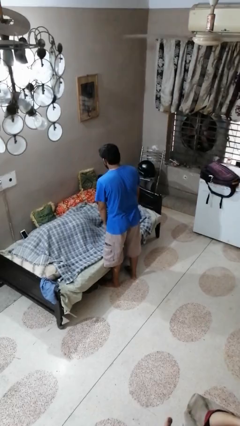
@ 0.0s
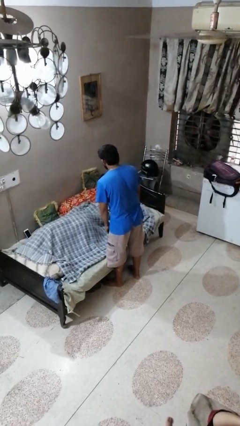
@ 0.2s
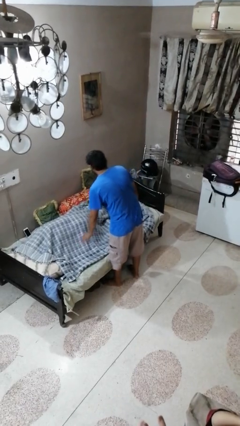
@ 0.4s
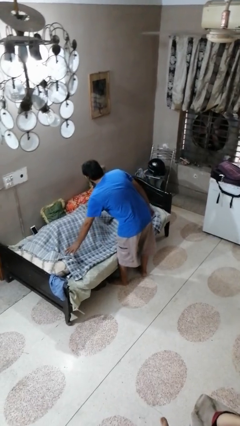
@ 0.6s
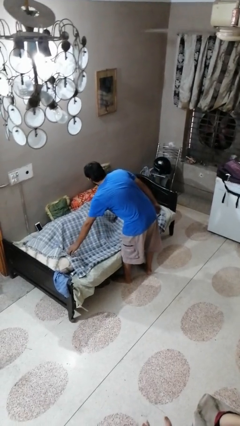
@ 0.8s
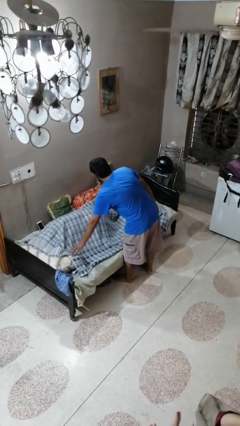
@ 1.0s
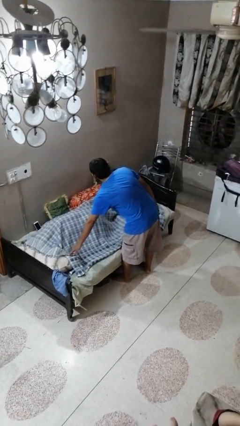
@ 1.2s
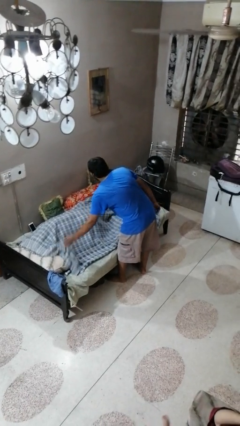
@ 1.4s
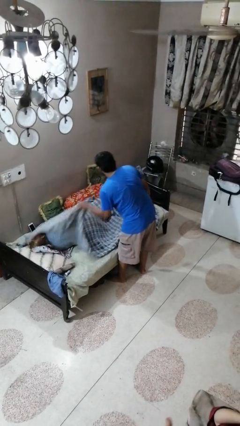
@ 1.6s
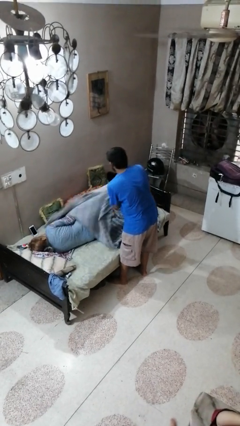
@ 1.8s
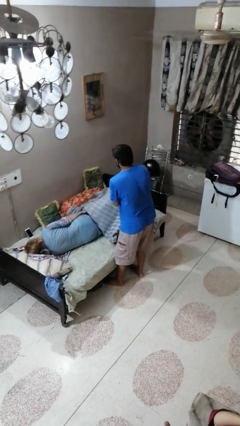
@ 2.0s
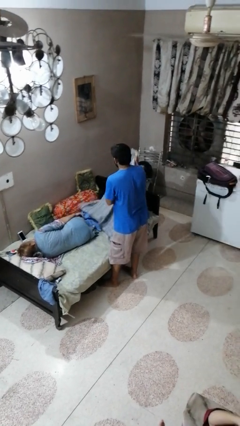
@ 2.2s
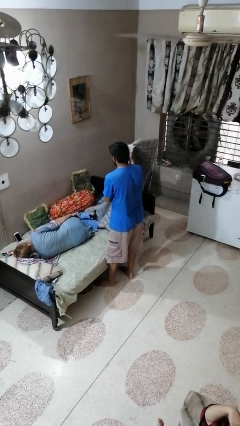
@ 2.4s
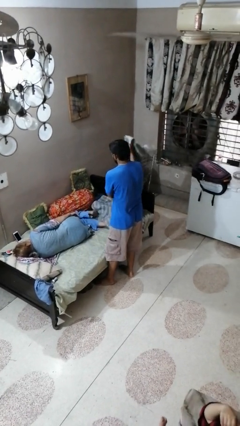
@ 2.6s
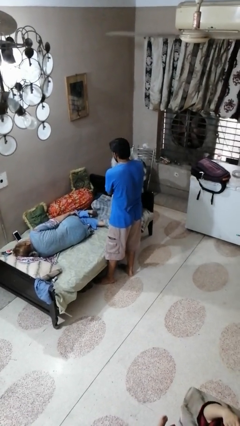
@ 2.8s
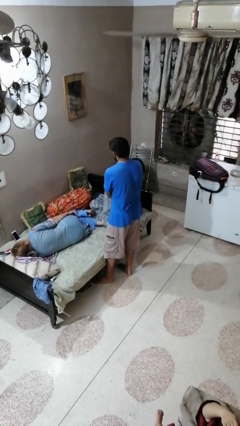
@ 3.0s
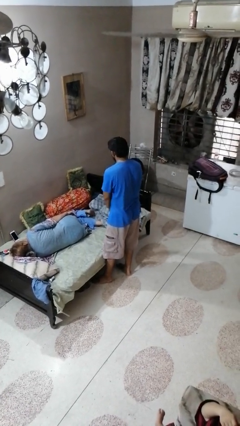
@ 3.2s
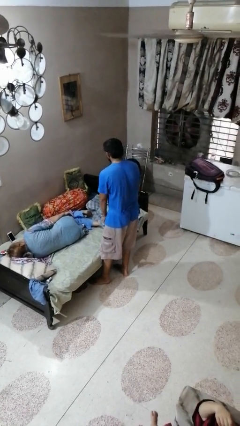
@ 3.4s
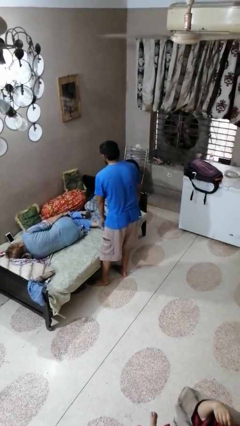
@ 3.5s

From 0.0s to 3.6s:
person uncovers friend with blanket

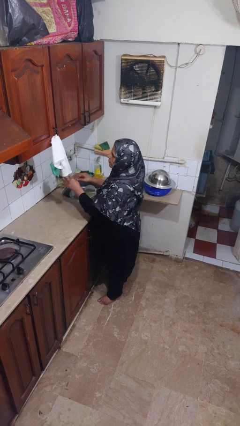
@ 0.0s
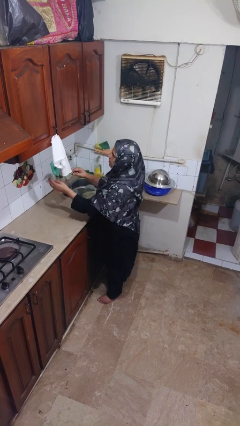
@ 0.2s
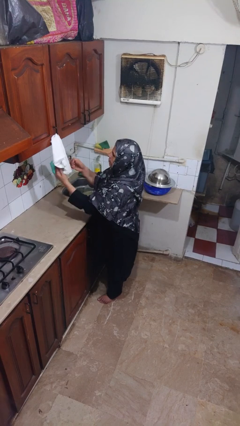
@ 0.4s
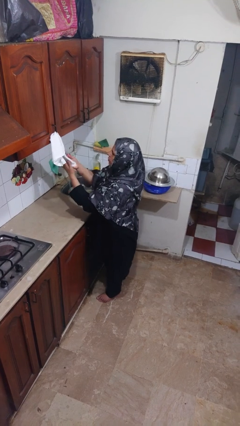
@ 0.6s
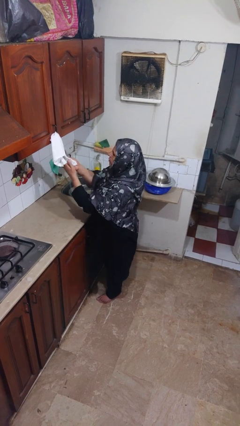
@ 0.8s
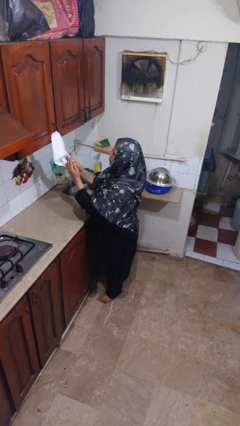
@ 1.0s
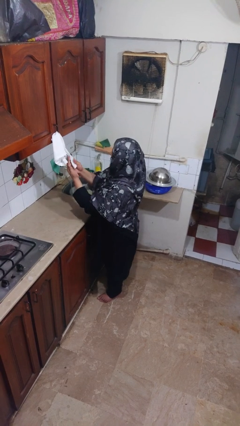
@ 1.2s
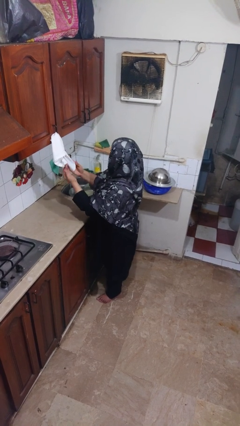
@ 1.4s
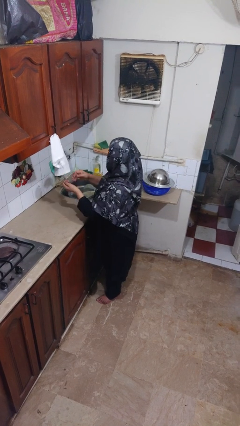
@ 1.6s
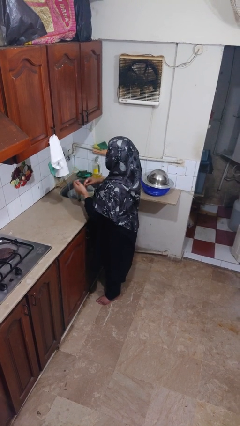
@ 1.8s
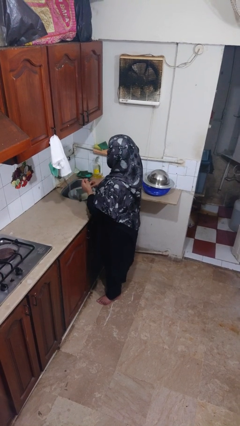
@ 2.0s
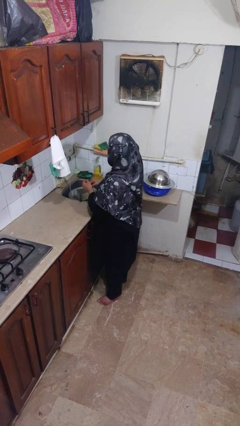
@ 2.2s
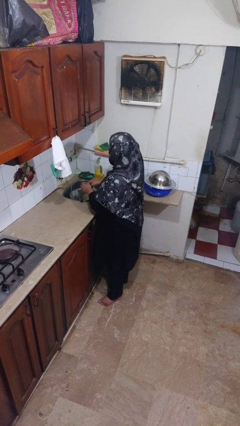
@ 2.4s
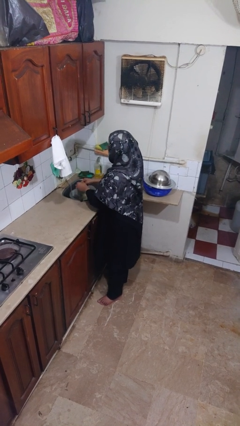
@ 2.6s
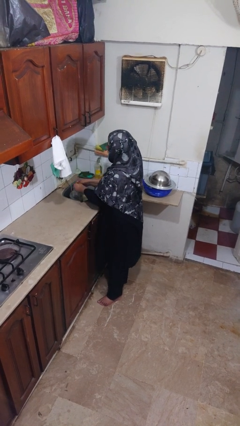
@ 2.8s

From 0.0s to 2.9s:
person dries hands with towel

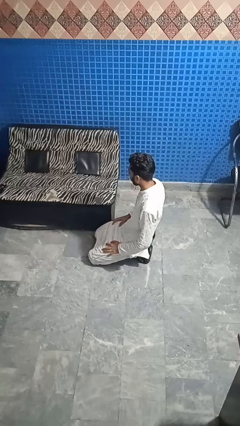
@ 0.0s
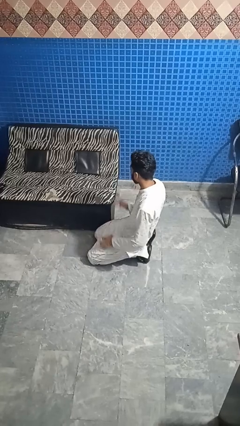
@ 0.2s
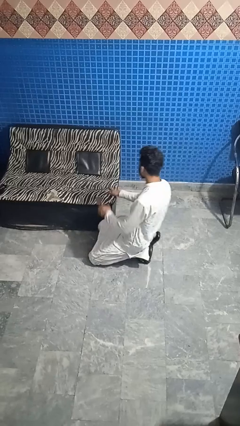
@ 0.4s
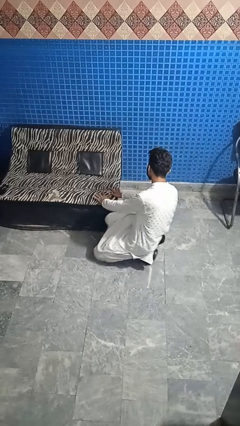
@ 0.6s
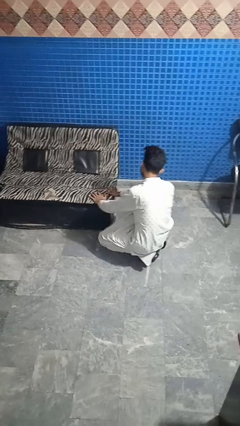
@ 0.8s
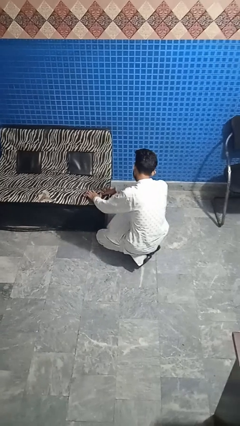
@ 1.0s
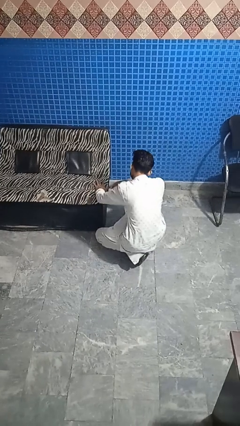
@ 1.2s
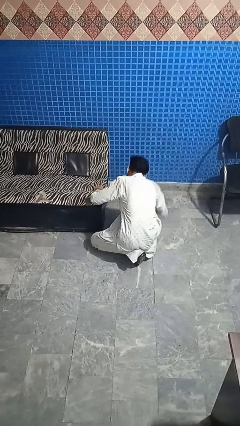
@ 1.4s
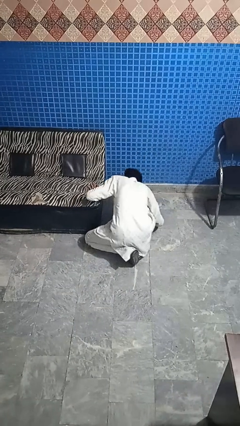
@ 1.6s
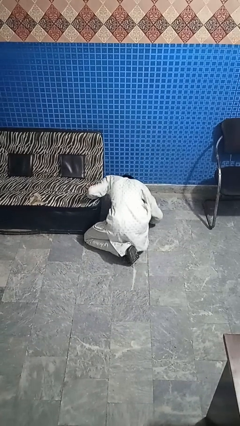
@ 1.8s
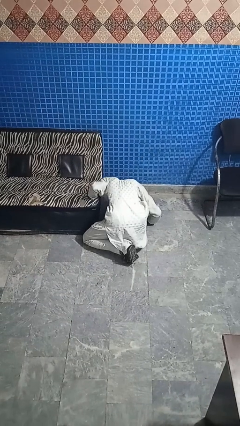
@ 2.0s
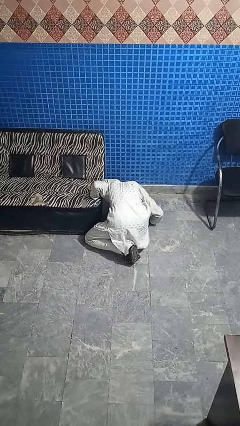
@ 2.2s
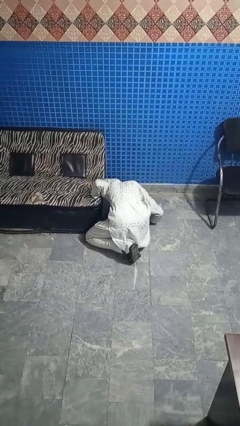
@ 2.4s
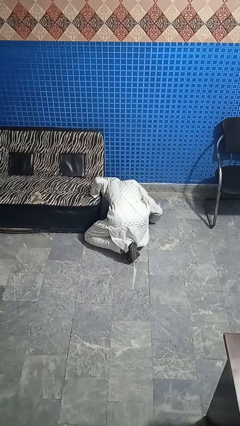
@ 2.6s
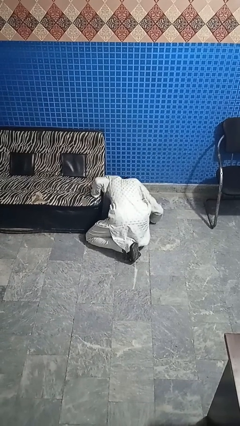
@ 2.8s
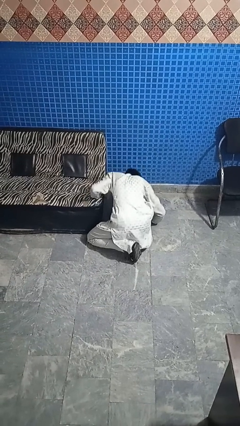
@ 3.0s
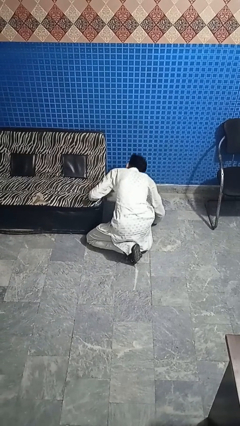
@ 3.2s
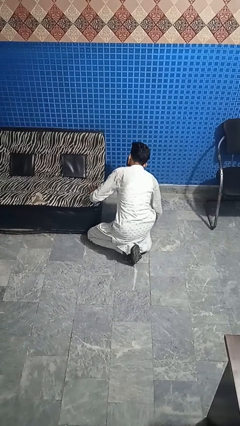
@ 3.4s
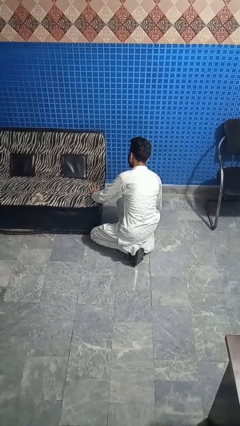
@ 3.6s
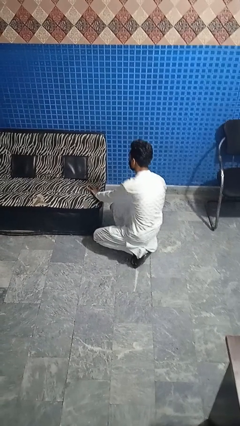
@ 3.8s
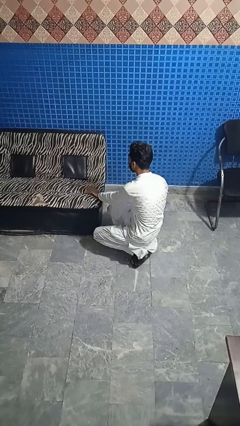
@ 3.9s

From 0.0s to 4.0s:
person searches under couch

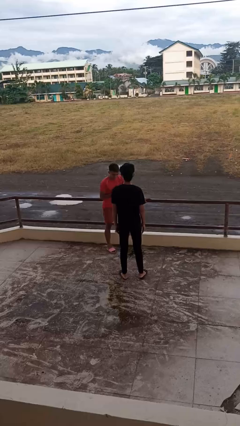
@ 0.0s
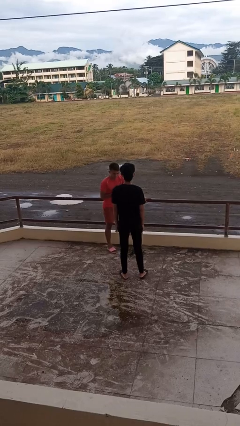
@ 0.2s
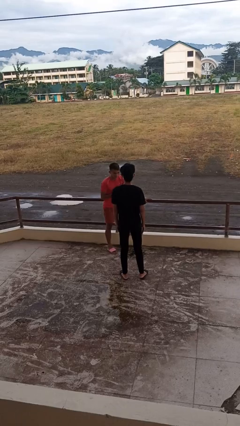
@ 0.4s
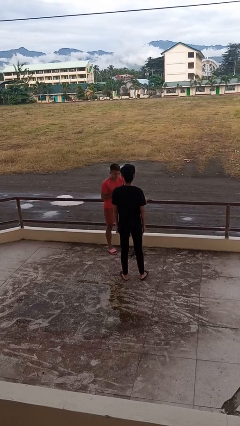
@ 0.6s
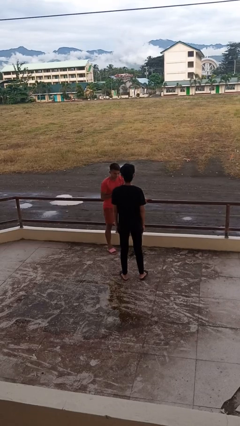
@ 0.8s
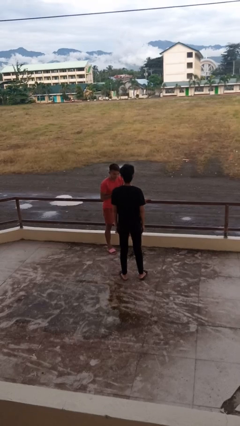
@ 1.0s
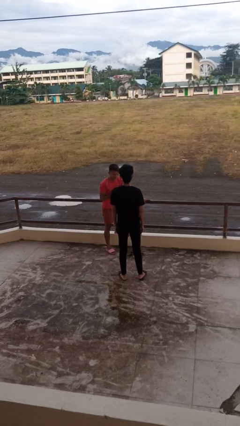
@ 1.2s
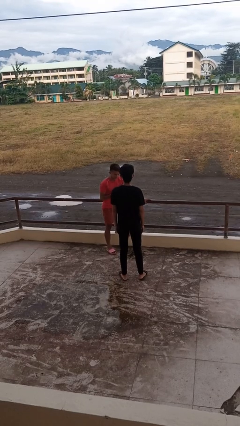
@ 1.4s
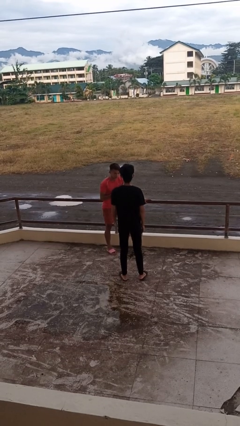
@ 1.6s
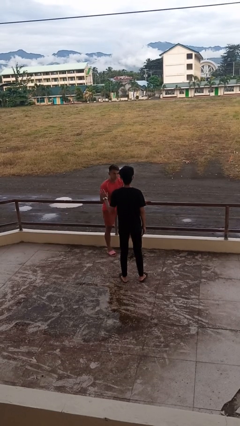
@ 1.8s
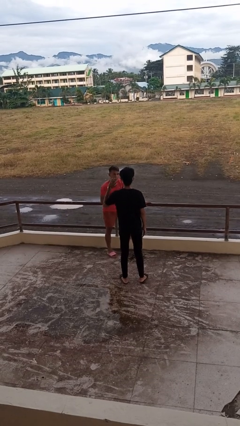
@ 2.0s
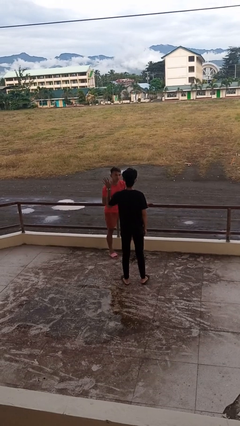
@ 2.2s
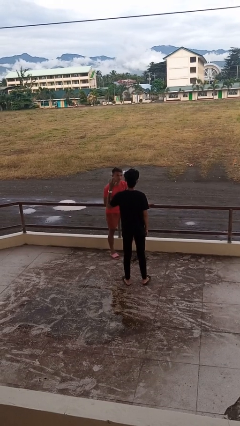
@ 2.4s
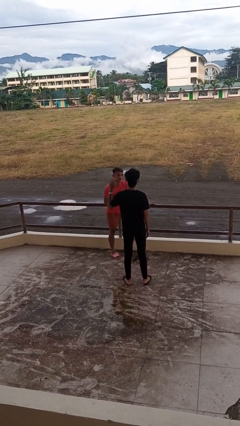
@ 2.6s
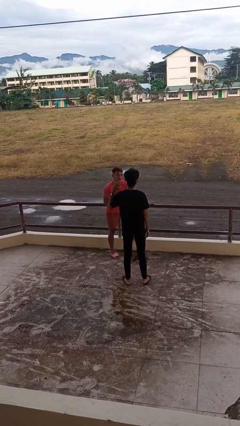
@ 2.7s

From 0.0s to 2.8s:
person waves at person

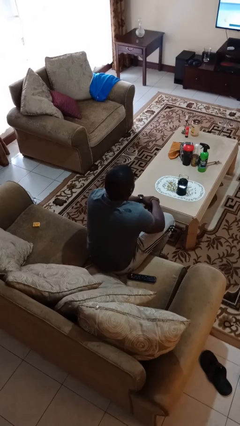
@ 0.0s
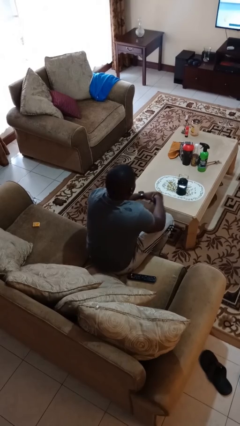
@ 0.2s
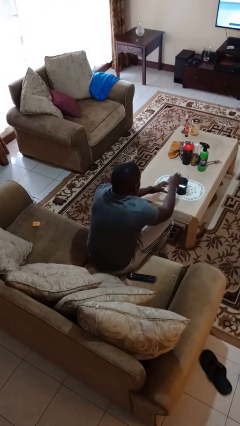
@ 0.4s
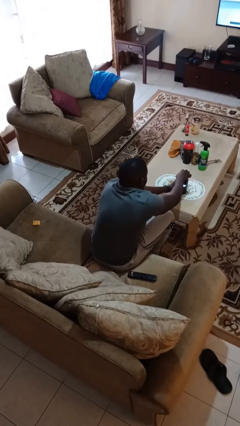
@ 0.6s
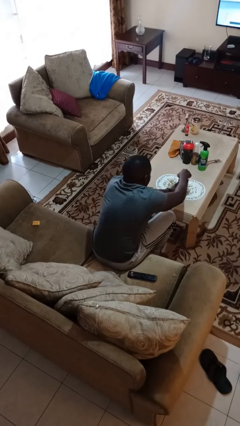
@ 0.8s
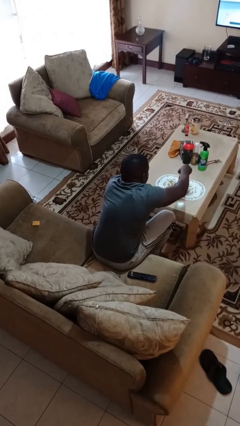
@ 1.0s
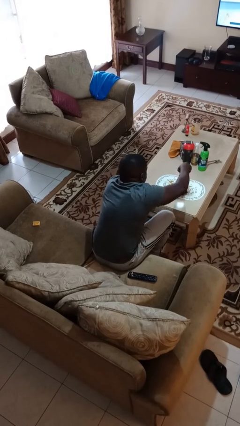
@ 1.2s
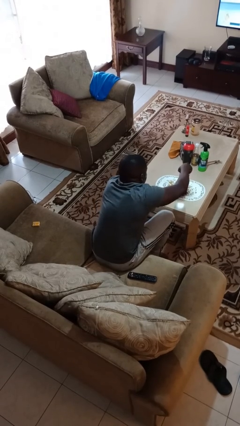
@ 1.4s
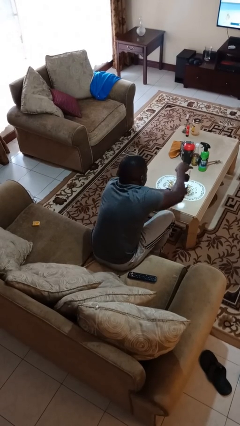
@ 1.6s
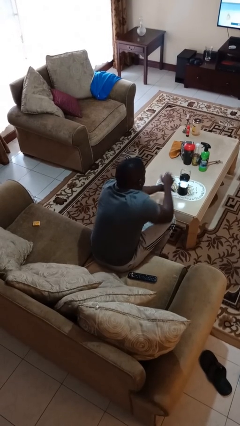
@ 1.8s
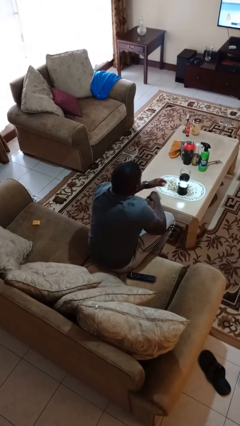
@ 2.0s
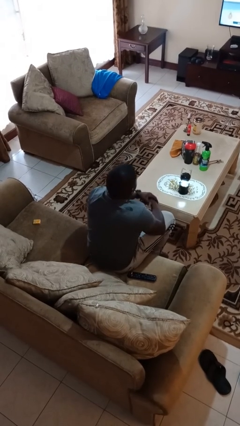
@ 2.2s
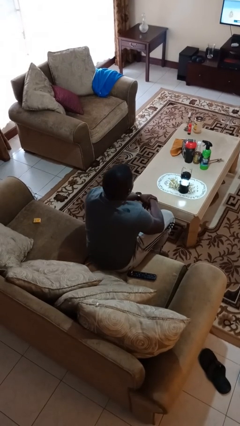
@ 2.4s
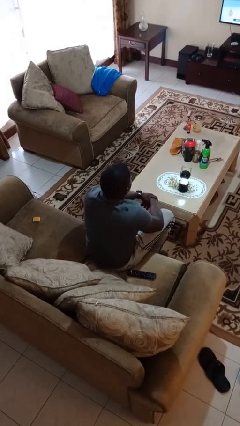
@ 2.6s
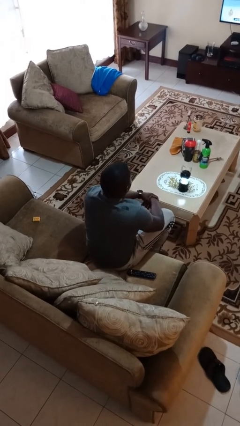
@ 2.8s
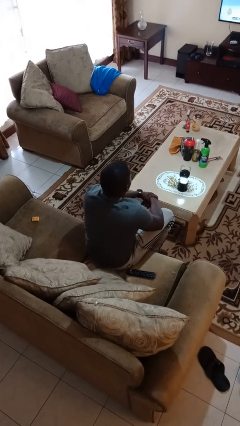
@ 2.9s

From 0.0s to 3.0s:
person turns on lamp

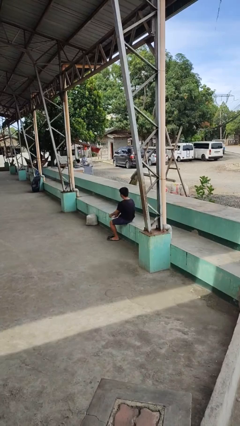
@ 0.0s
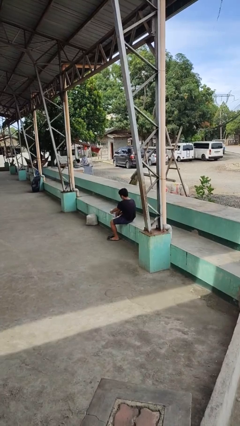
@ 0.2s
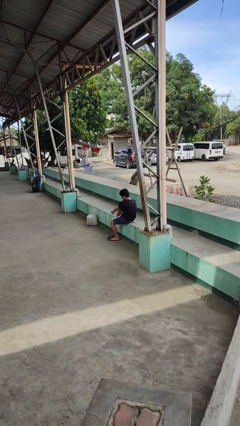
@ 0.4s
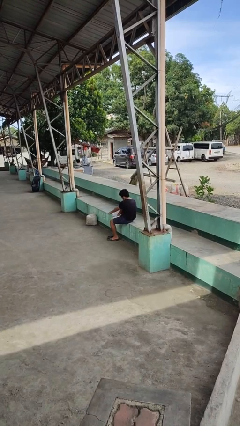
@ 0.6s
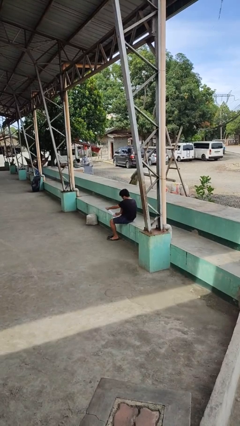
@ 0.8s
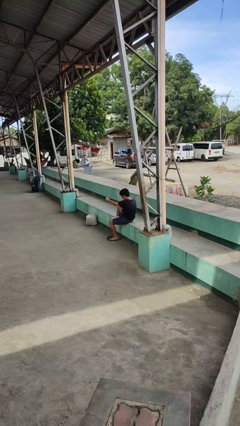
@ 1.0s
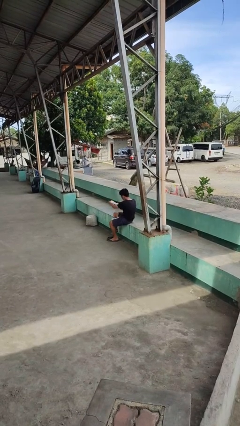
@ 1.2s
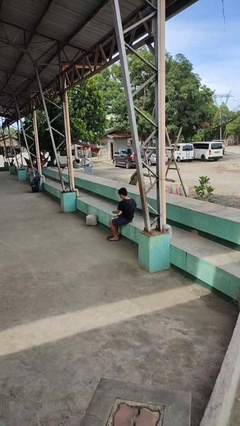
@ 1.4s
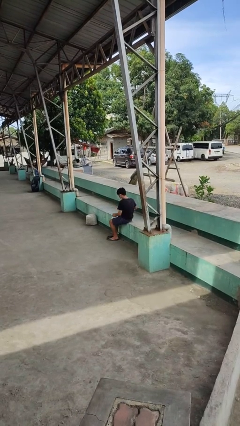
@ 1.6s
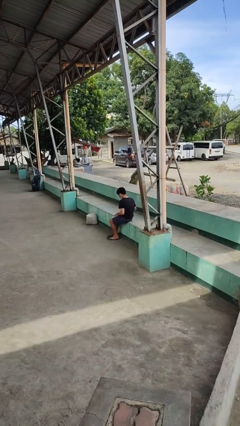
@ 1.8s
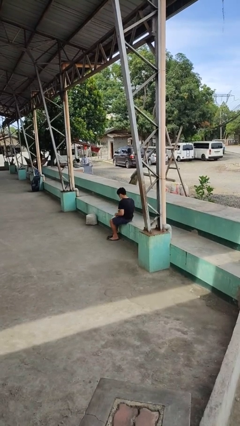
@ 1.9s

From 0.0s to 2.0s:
person takes off socks
